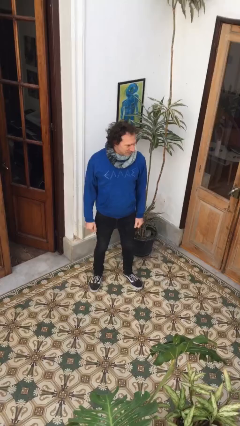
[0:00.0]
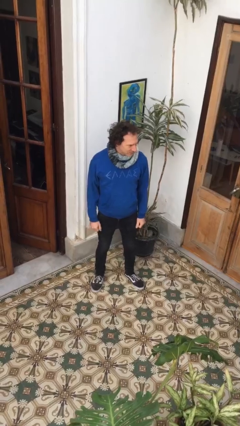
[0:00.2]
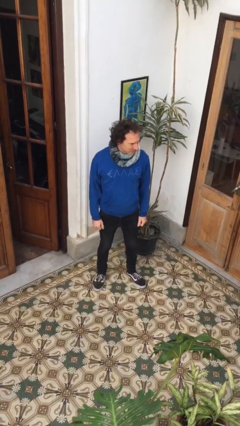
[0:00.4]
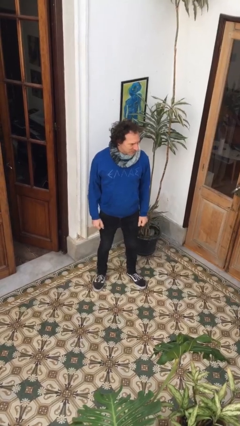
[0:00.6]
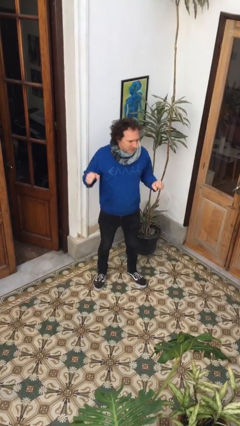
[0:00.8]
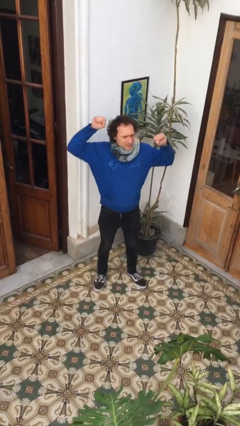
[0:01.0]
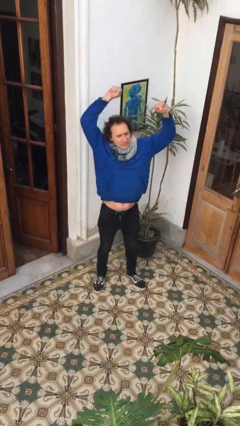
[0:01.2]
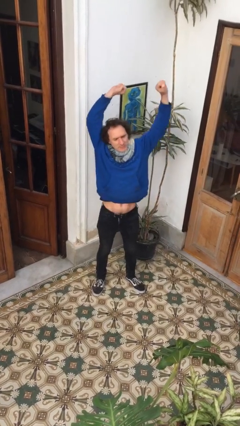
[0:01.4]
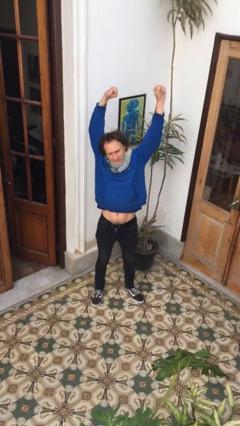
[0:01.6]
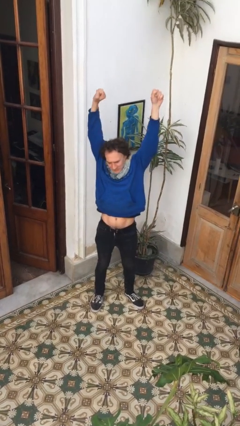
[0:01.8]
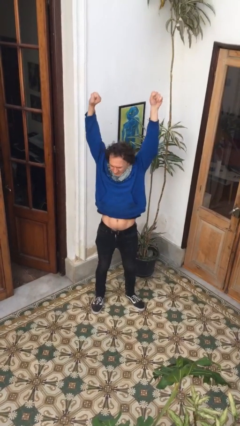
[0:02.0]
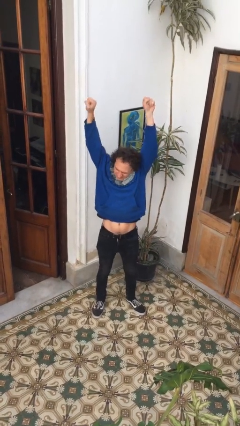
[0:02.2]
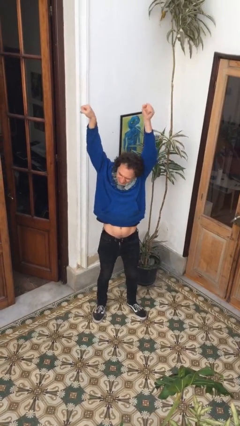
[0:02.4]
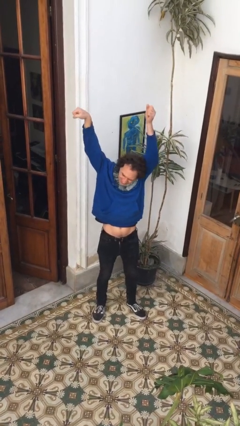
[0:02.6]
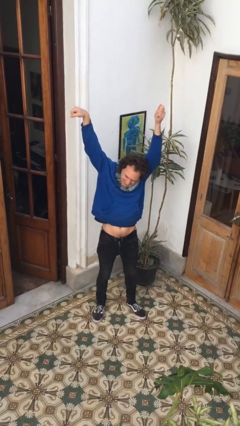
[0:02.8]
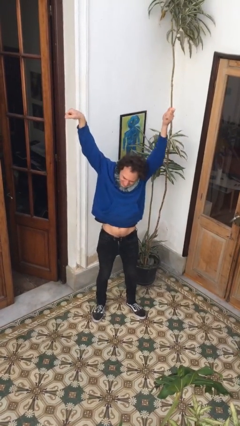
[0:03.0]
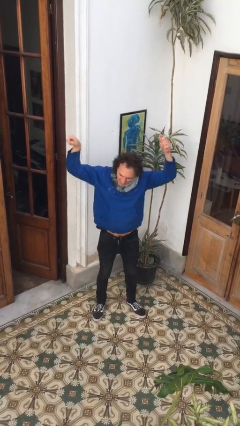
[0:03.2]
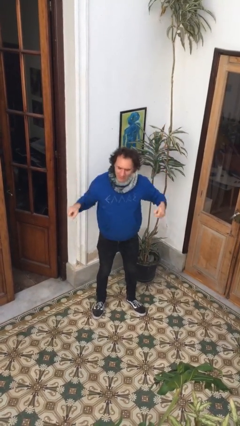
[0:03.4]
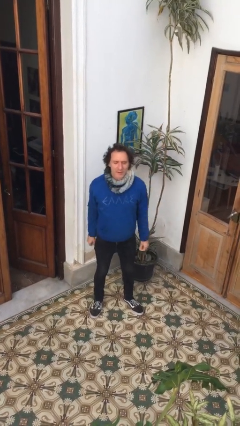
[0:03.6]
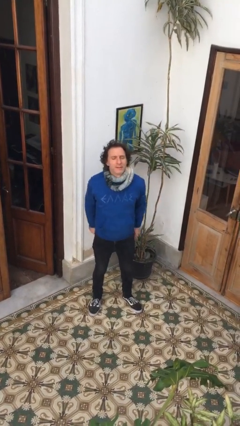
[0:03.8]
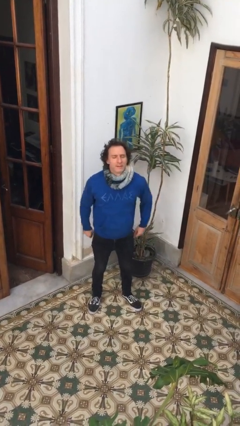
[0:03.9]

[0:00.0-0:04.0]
person stretches arms over head

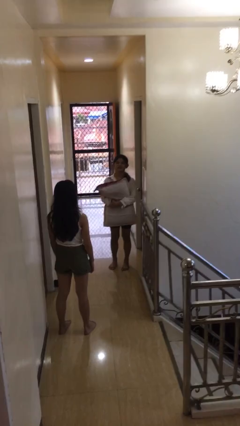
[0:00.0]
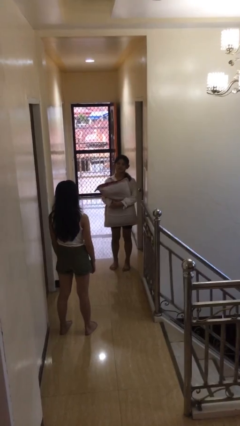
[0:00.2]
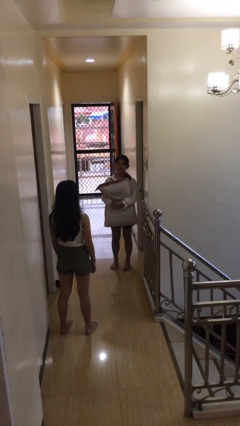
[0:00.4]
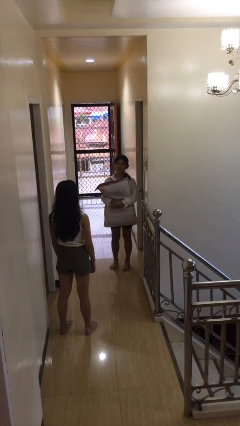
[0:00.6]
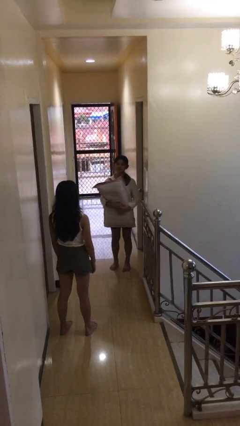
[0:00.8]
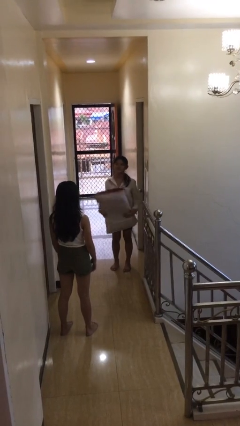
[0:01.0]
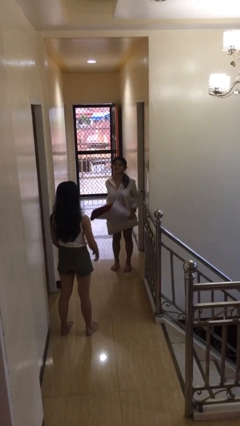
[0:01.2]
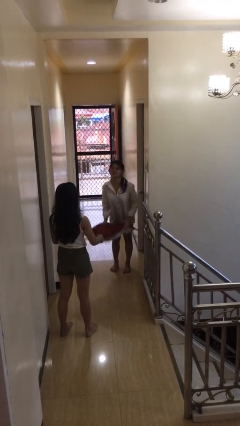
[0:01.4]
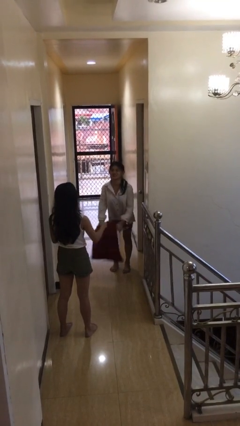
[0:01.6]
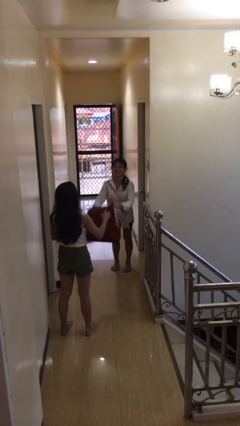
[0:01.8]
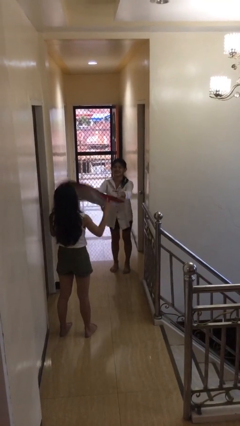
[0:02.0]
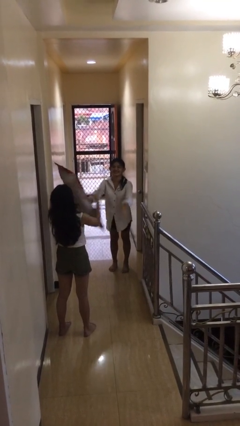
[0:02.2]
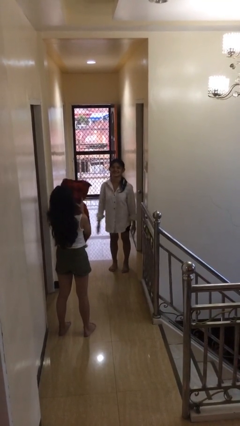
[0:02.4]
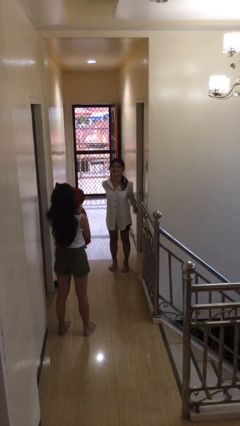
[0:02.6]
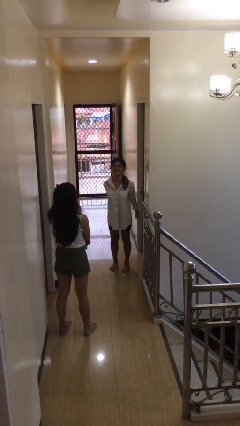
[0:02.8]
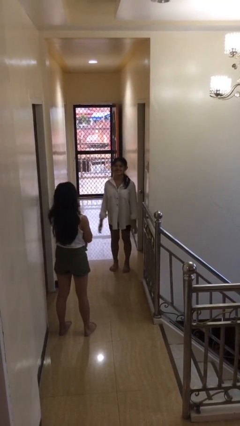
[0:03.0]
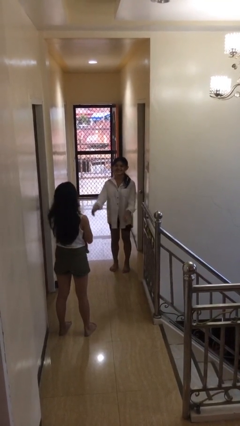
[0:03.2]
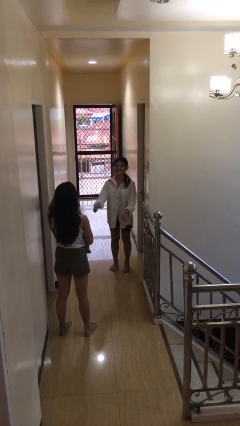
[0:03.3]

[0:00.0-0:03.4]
person throws object to person

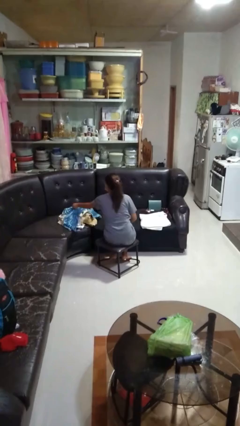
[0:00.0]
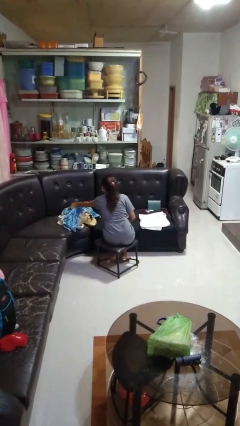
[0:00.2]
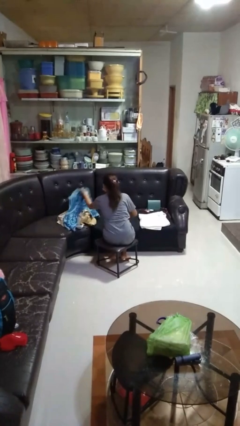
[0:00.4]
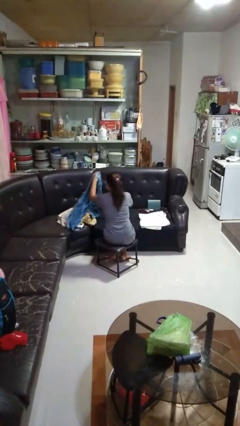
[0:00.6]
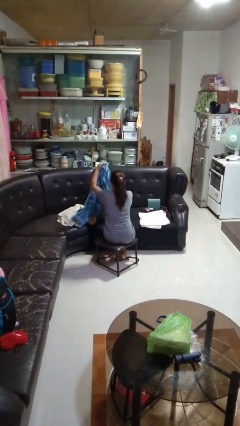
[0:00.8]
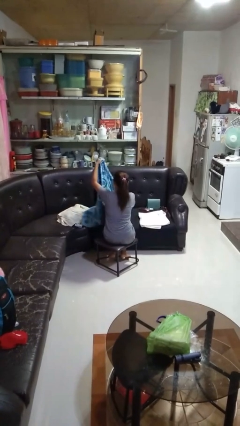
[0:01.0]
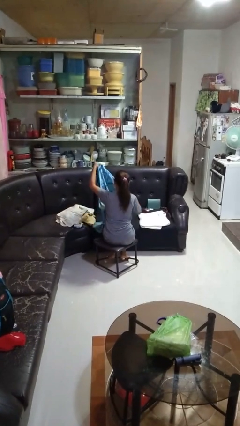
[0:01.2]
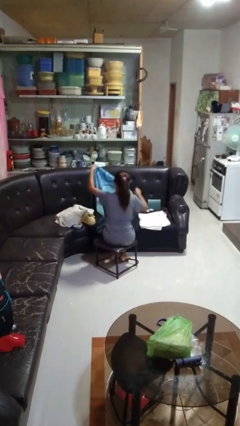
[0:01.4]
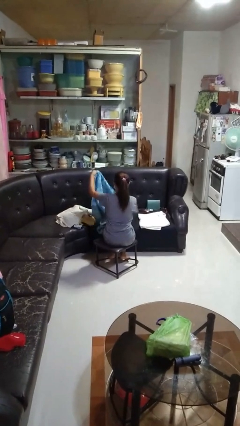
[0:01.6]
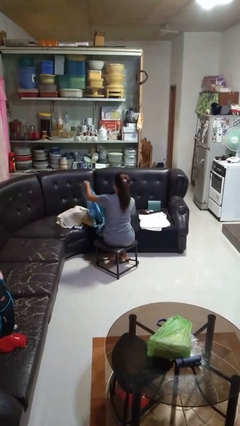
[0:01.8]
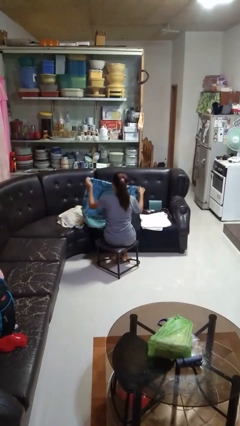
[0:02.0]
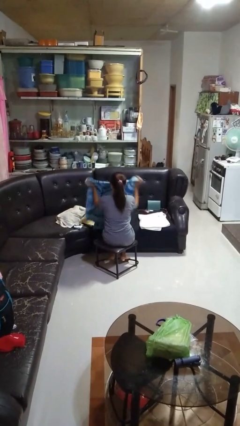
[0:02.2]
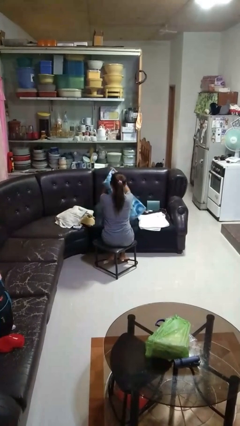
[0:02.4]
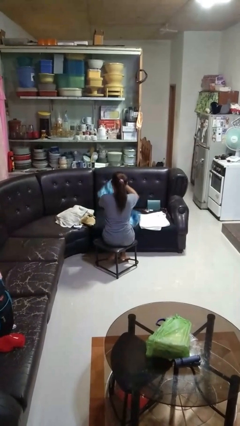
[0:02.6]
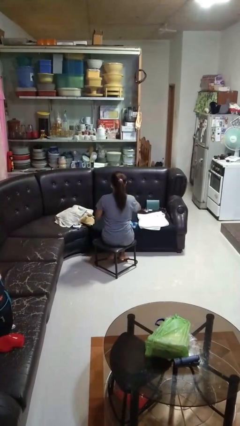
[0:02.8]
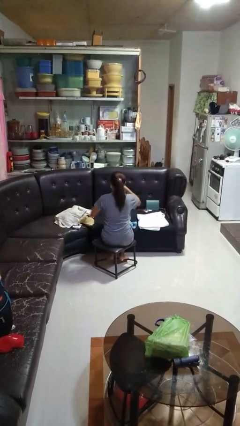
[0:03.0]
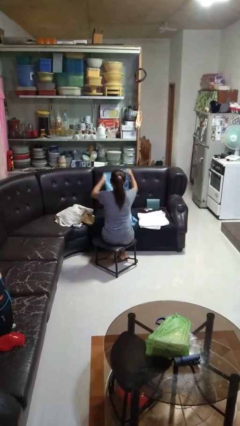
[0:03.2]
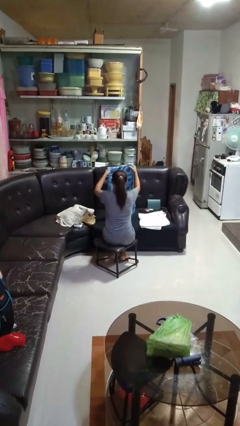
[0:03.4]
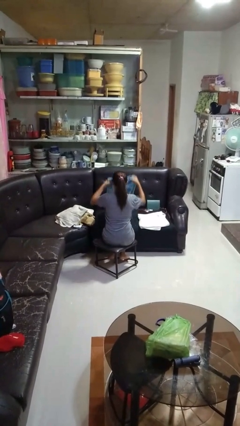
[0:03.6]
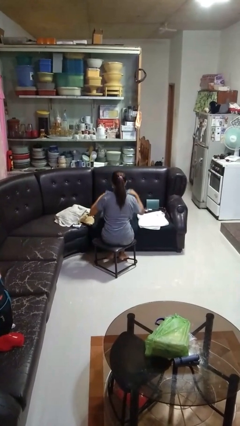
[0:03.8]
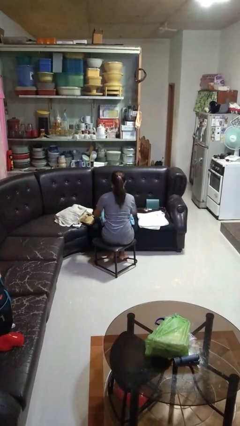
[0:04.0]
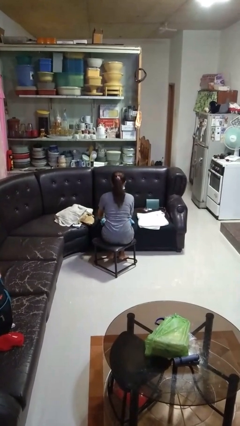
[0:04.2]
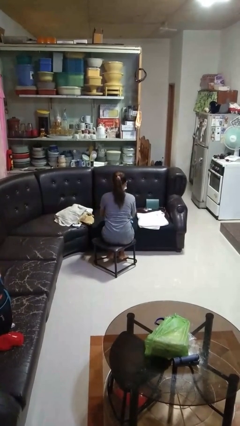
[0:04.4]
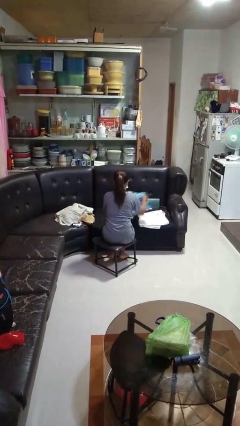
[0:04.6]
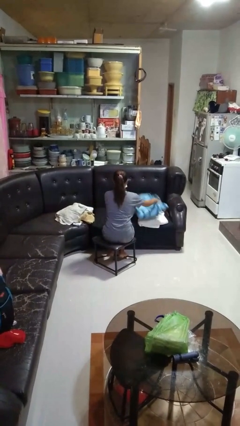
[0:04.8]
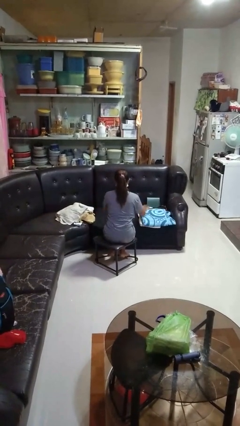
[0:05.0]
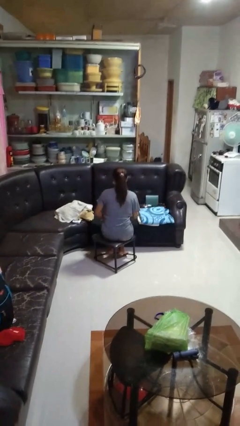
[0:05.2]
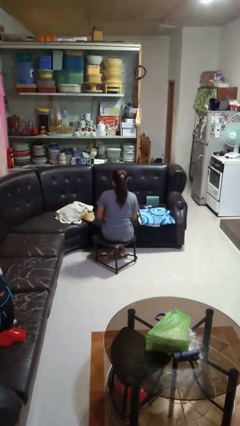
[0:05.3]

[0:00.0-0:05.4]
person folds towel

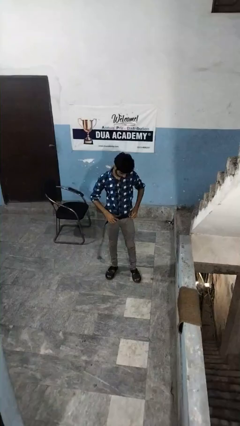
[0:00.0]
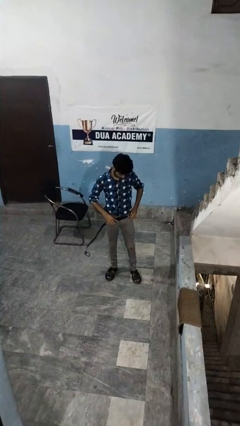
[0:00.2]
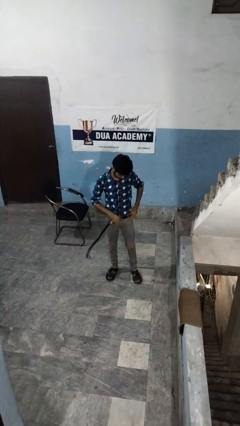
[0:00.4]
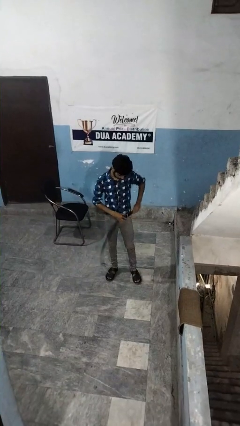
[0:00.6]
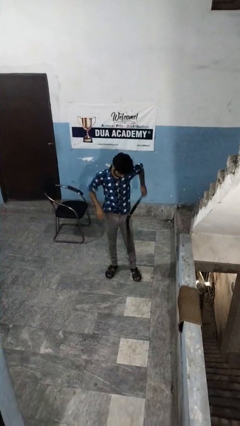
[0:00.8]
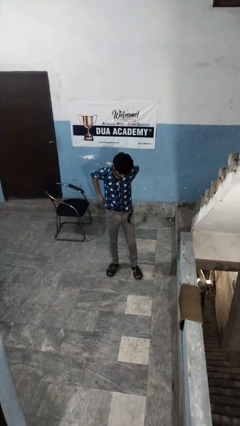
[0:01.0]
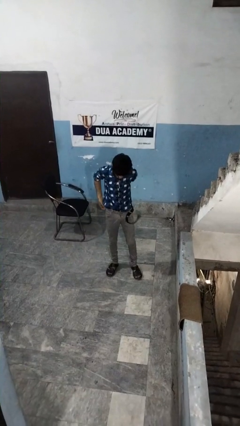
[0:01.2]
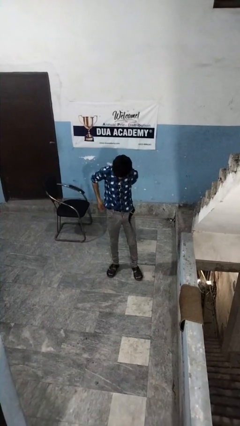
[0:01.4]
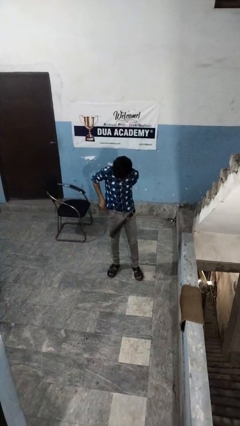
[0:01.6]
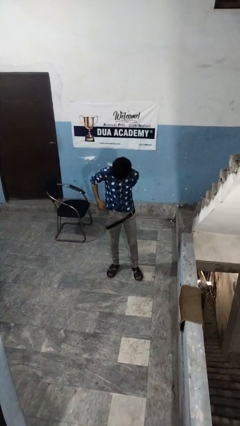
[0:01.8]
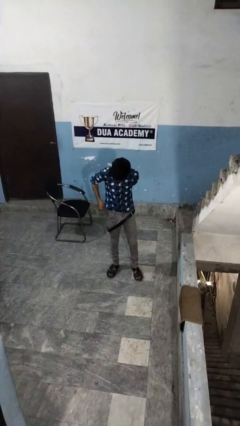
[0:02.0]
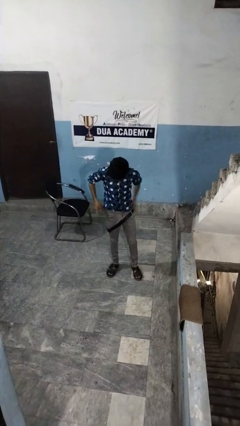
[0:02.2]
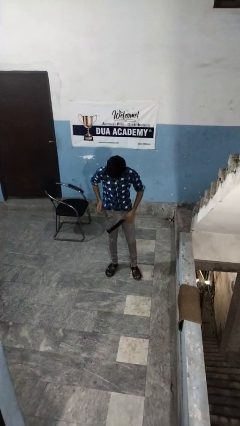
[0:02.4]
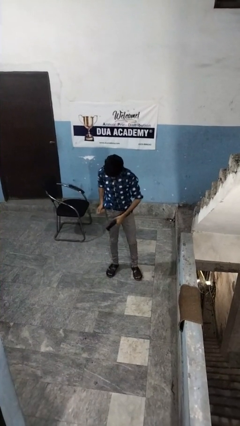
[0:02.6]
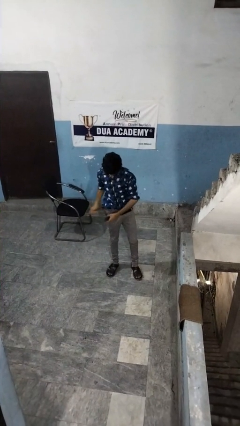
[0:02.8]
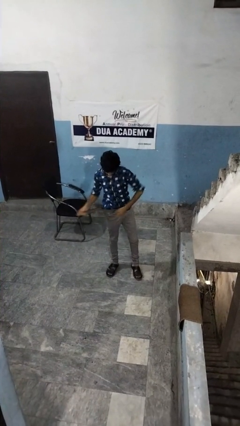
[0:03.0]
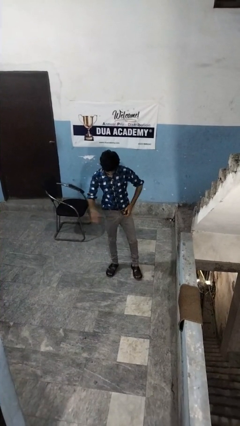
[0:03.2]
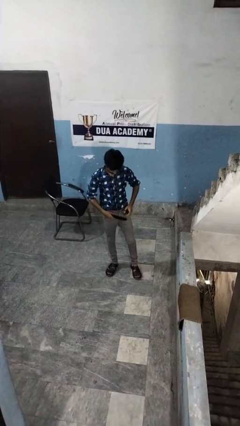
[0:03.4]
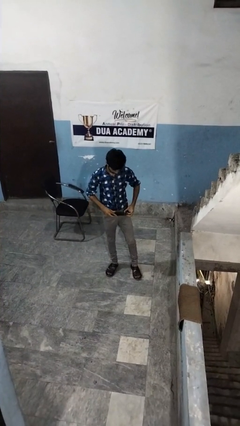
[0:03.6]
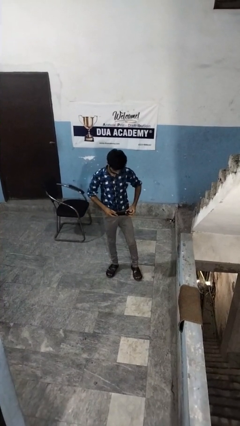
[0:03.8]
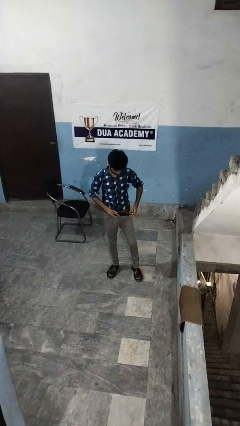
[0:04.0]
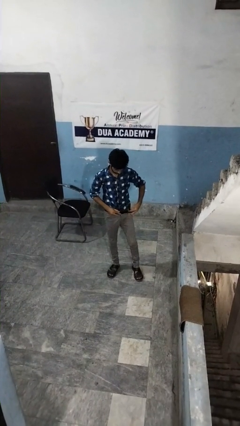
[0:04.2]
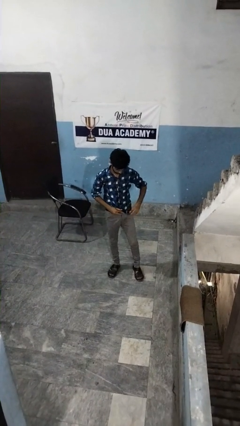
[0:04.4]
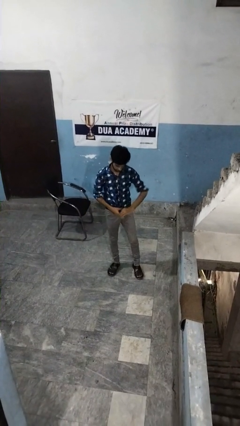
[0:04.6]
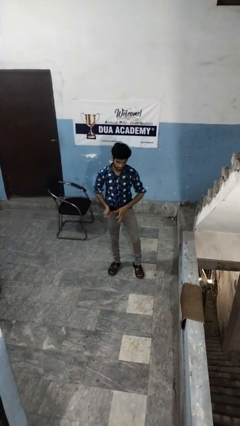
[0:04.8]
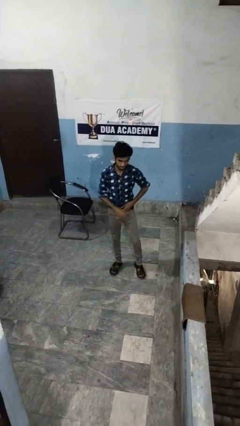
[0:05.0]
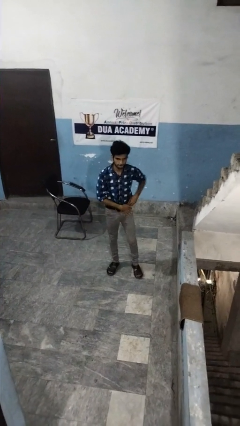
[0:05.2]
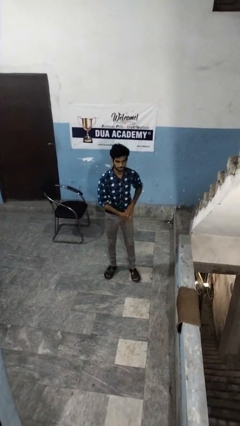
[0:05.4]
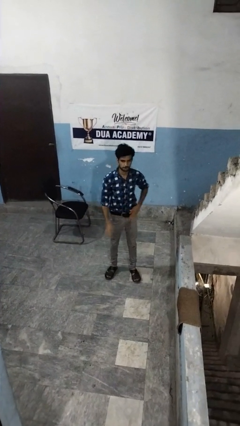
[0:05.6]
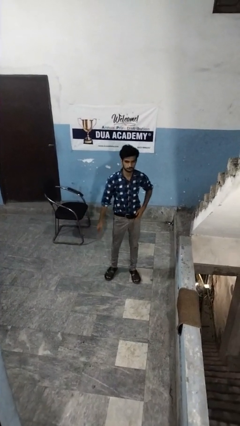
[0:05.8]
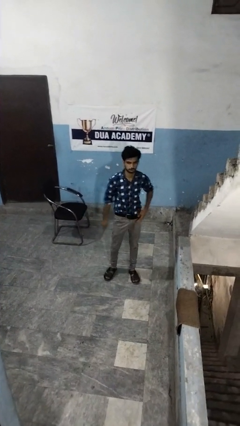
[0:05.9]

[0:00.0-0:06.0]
person puts on belt
